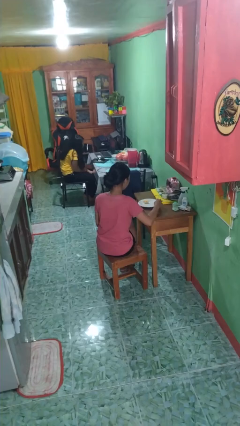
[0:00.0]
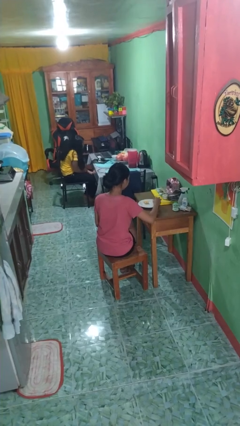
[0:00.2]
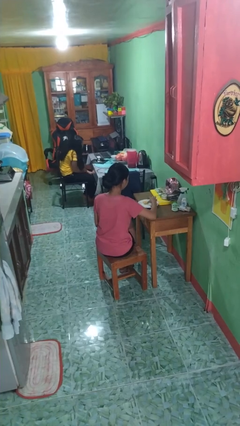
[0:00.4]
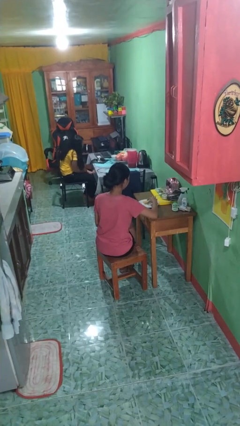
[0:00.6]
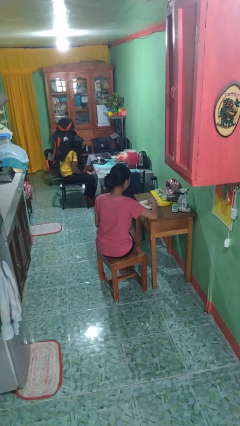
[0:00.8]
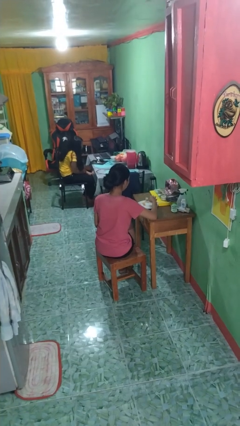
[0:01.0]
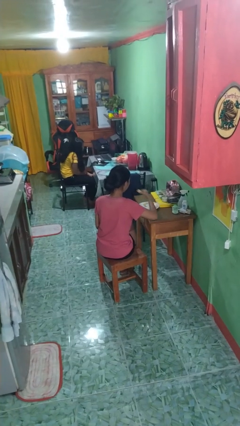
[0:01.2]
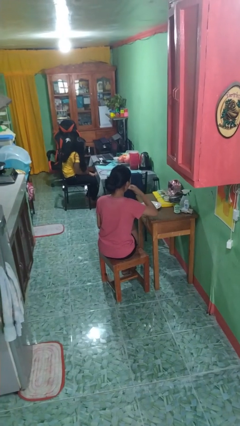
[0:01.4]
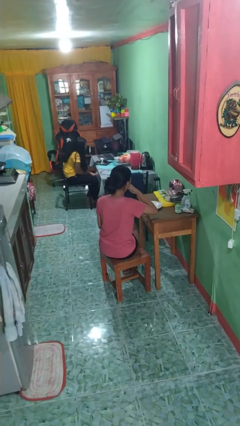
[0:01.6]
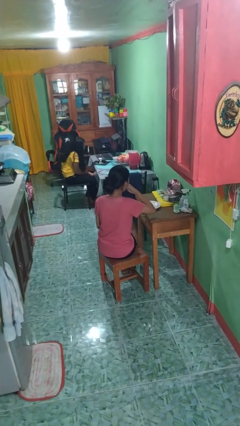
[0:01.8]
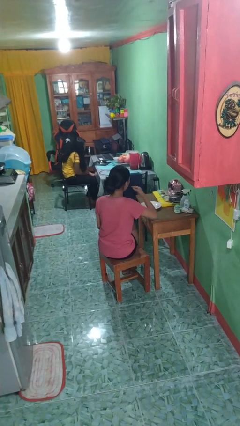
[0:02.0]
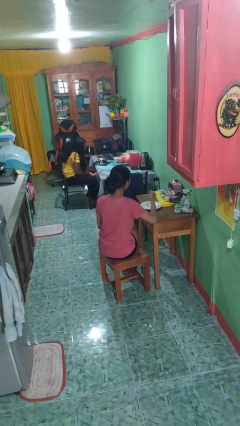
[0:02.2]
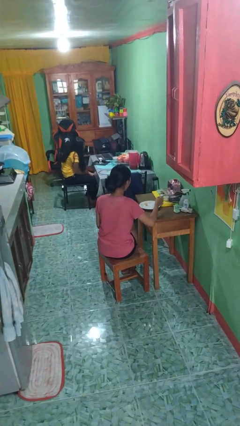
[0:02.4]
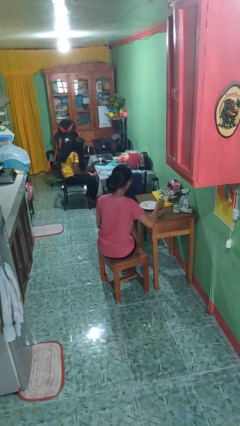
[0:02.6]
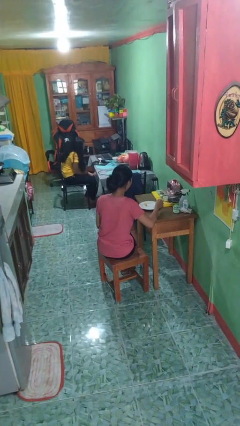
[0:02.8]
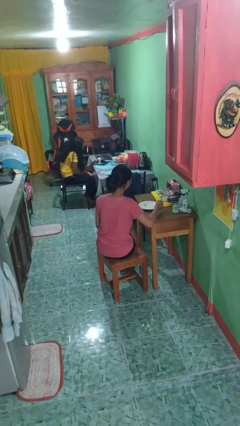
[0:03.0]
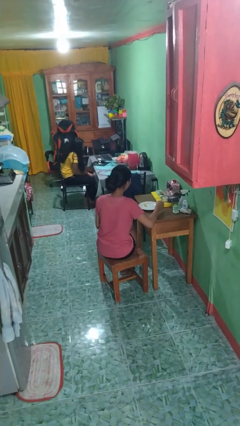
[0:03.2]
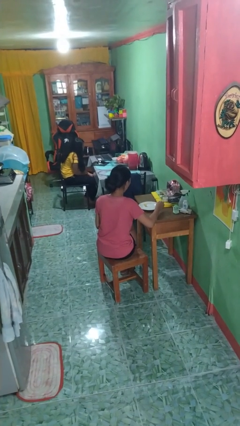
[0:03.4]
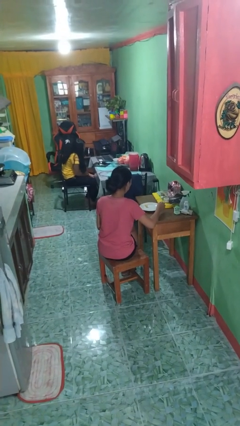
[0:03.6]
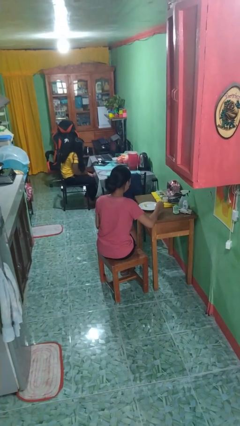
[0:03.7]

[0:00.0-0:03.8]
person eats with hands

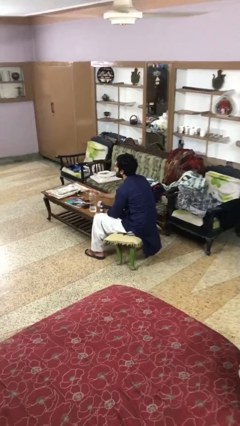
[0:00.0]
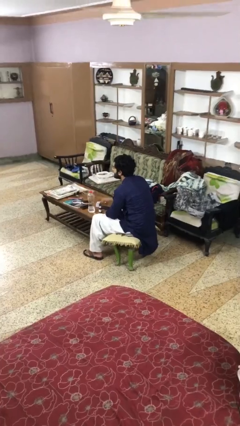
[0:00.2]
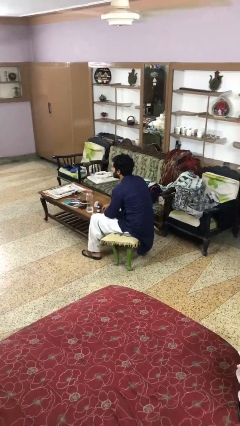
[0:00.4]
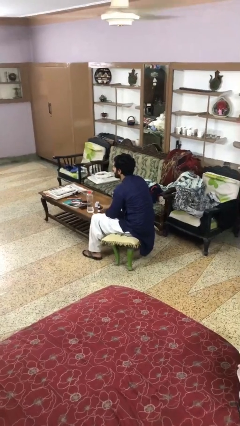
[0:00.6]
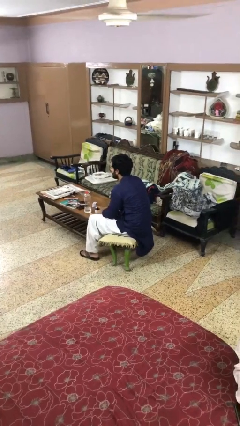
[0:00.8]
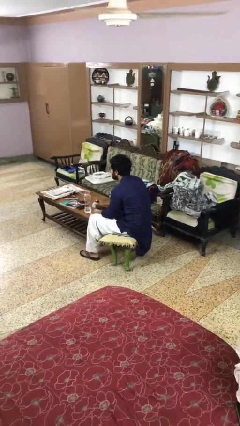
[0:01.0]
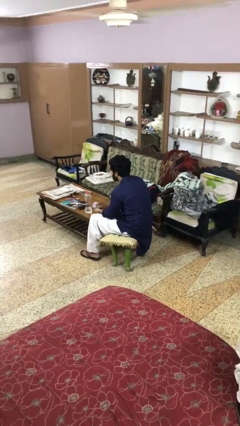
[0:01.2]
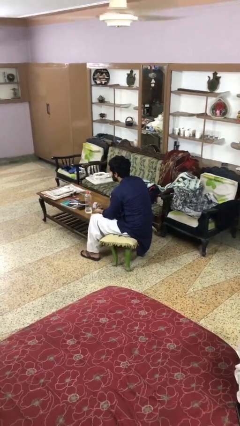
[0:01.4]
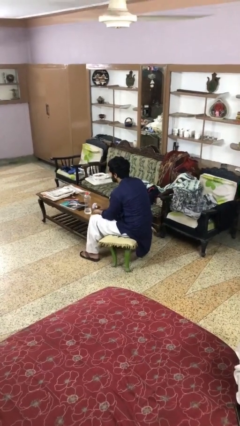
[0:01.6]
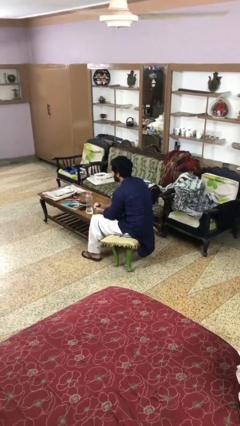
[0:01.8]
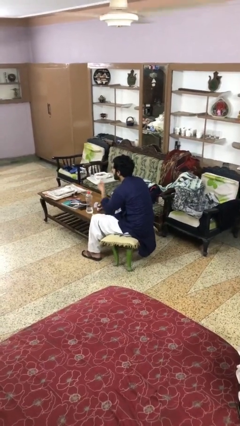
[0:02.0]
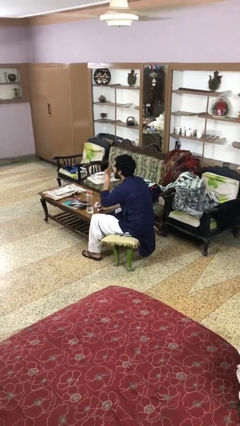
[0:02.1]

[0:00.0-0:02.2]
person takes medicine pills

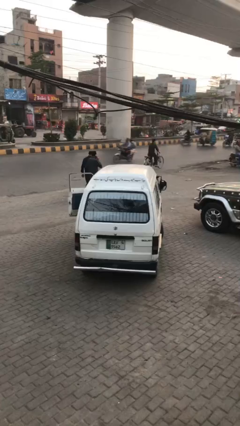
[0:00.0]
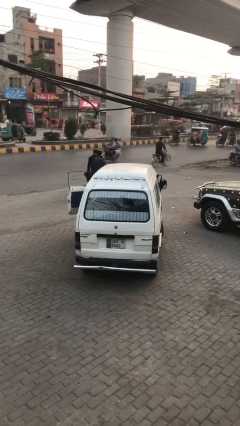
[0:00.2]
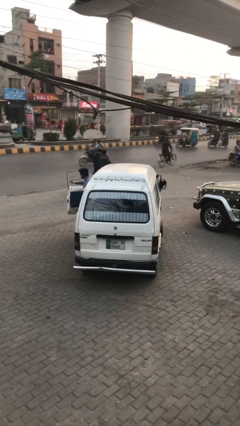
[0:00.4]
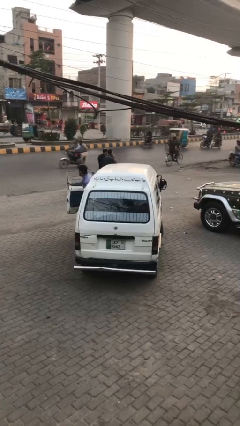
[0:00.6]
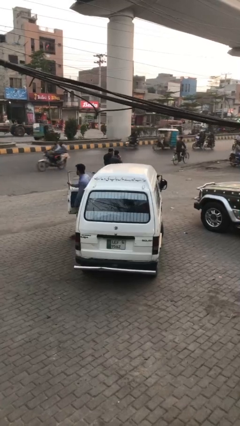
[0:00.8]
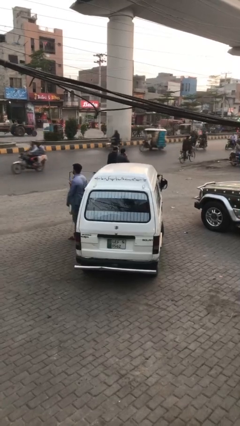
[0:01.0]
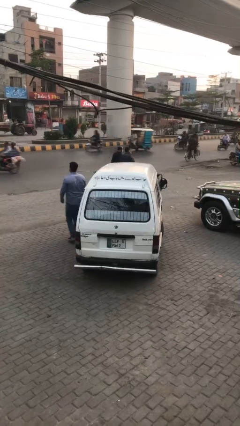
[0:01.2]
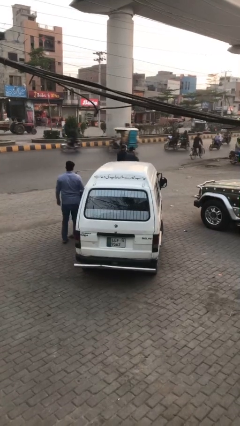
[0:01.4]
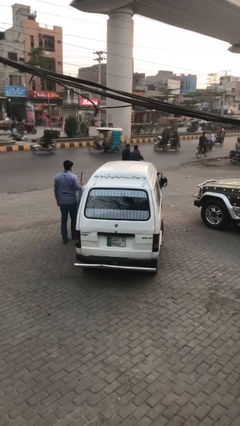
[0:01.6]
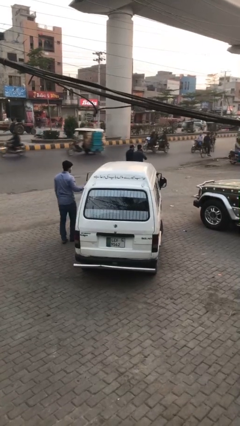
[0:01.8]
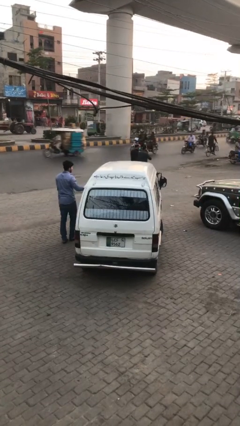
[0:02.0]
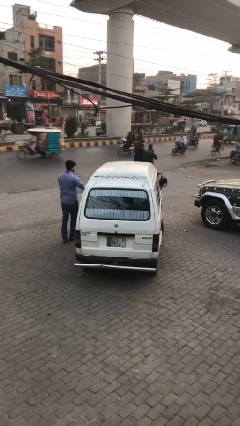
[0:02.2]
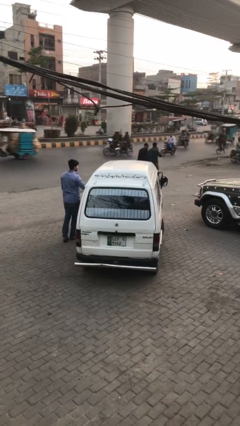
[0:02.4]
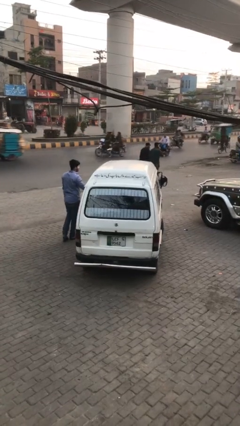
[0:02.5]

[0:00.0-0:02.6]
car drops off person

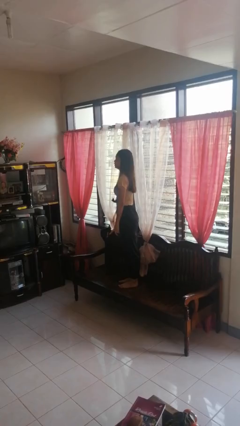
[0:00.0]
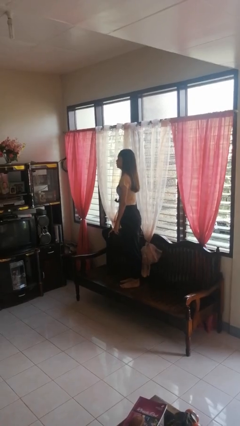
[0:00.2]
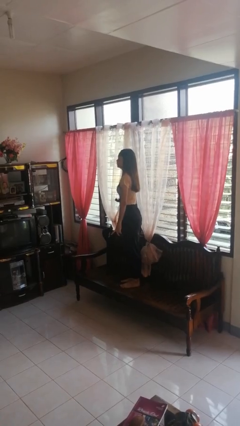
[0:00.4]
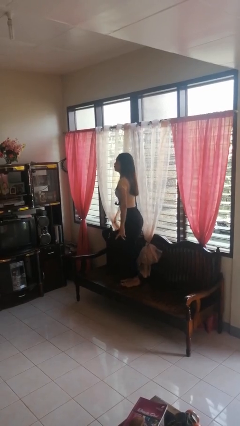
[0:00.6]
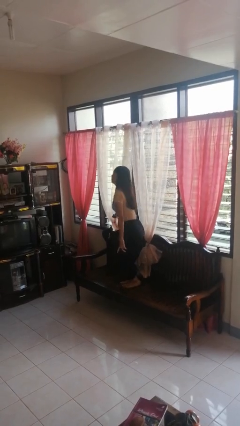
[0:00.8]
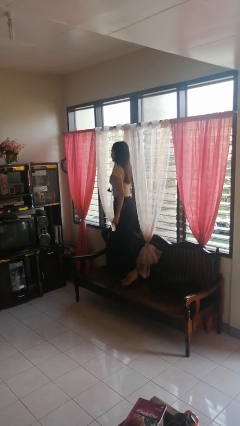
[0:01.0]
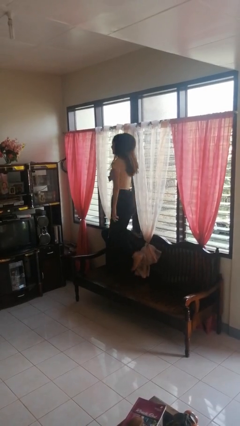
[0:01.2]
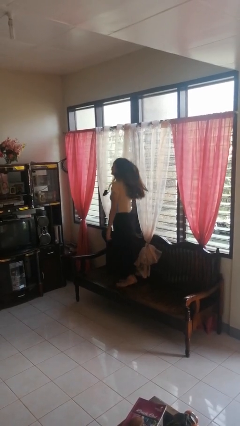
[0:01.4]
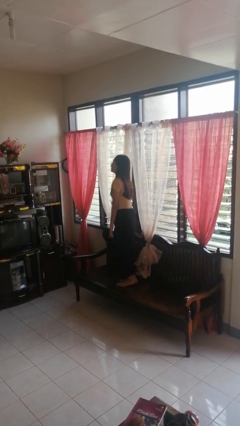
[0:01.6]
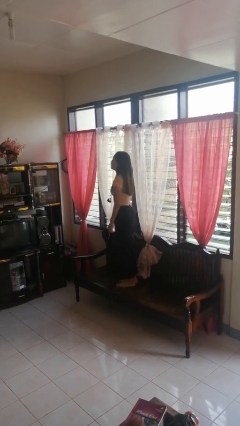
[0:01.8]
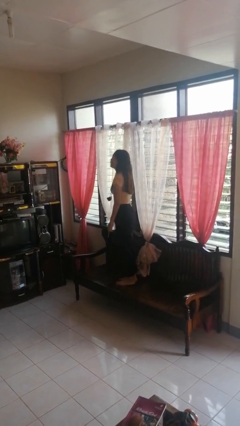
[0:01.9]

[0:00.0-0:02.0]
person jumps on couch

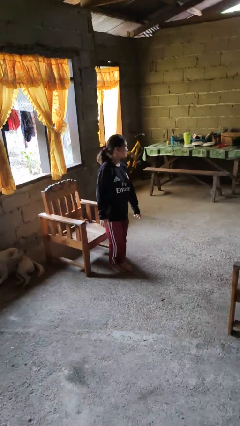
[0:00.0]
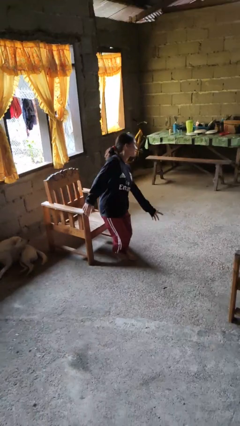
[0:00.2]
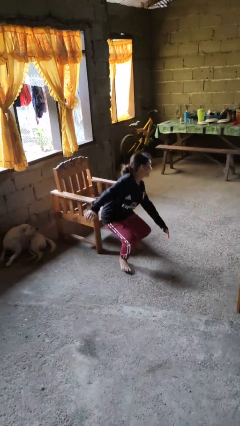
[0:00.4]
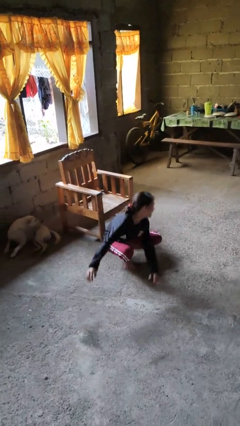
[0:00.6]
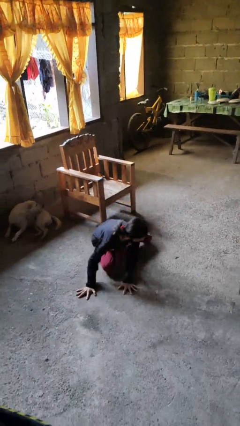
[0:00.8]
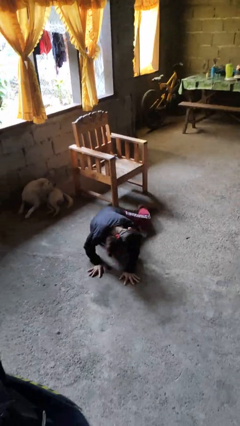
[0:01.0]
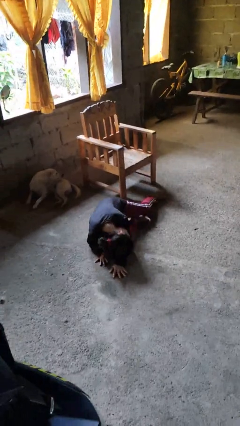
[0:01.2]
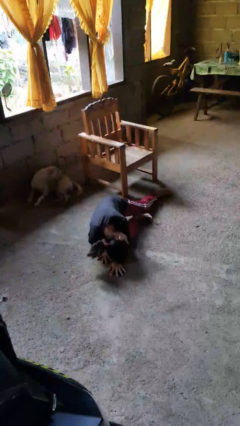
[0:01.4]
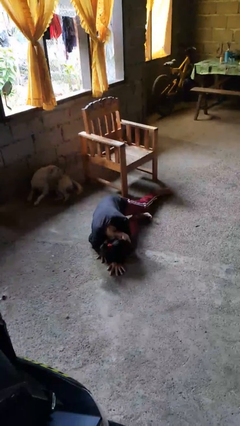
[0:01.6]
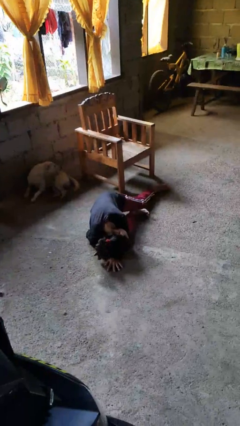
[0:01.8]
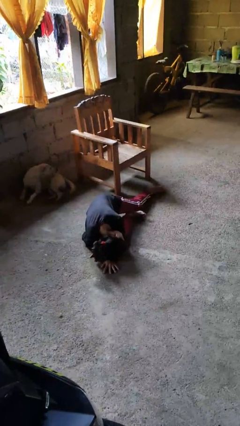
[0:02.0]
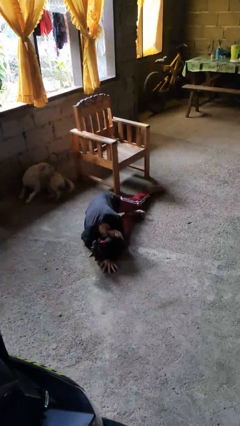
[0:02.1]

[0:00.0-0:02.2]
person falls from chair

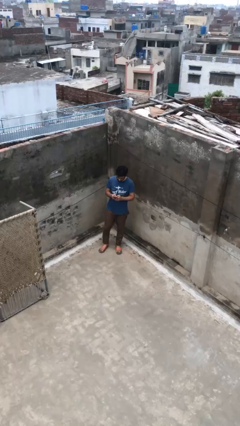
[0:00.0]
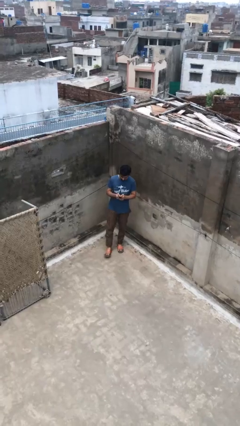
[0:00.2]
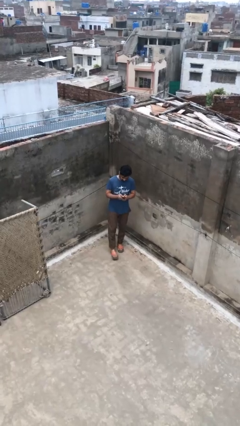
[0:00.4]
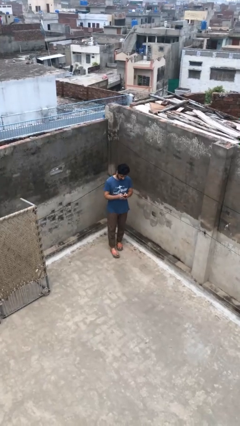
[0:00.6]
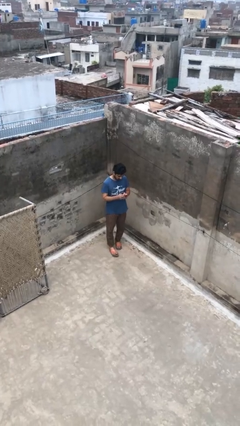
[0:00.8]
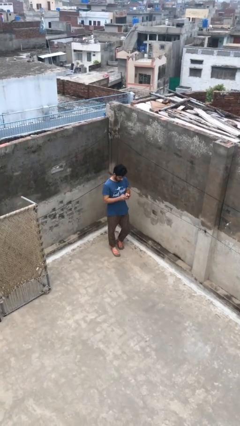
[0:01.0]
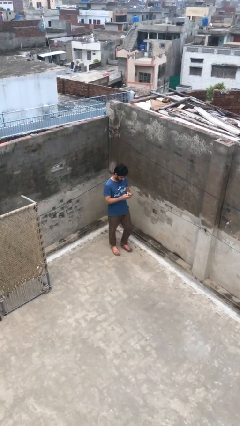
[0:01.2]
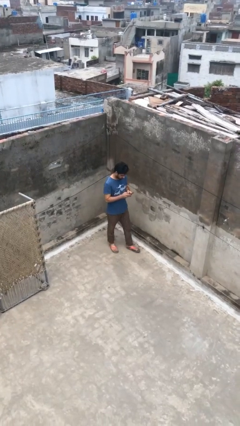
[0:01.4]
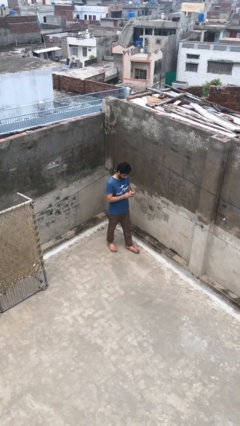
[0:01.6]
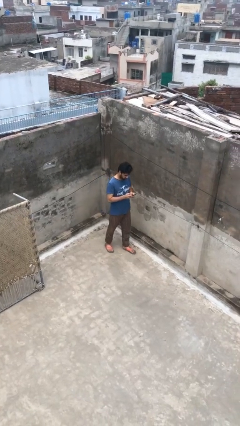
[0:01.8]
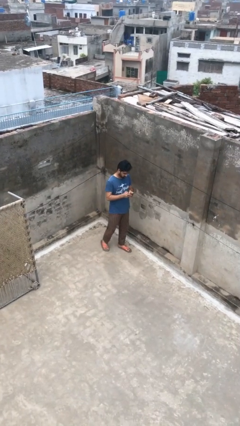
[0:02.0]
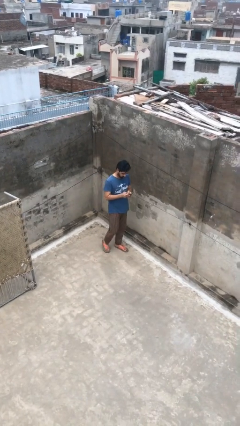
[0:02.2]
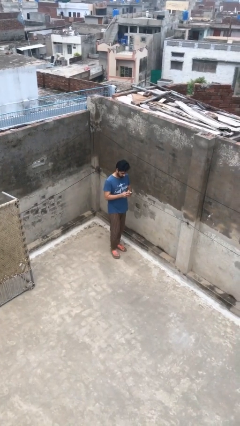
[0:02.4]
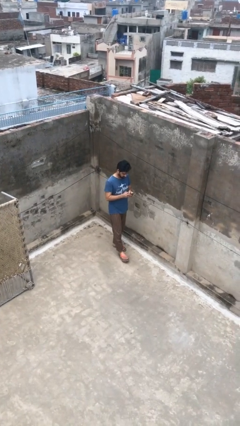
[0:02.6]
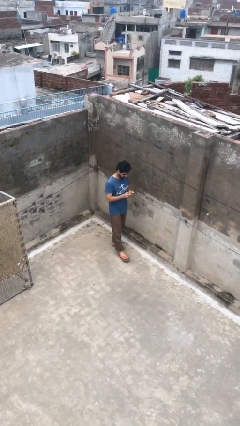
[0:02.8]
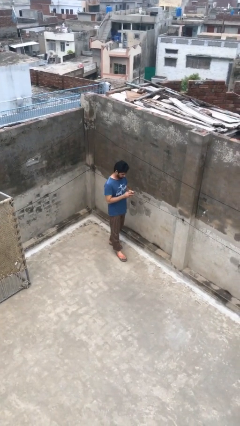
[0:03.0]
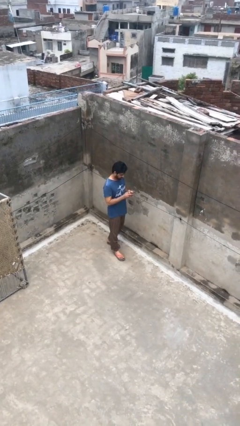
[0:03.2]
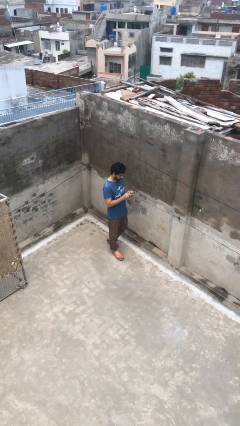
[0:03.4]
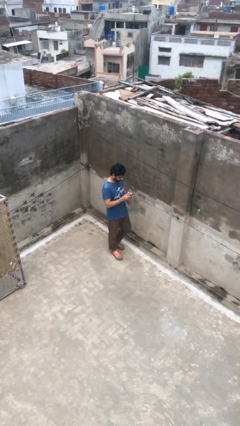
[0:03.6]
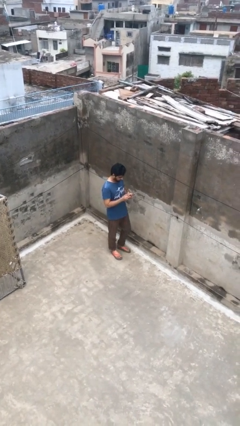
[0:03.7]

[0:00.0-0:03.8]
person texts on phone

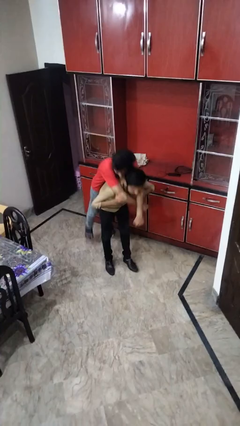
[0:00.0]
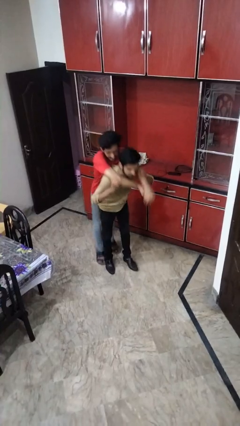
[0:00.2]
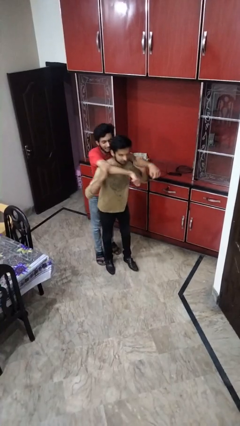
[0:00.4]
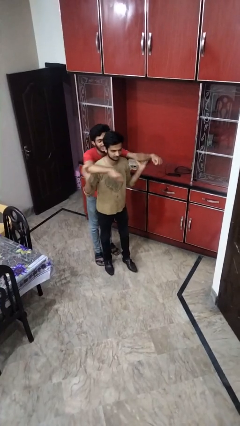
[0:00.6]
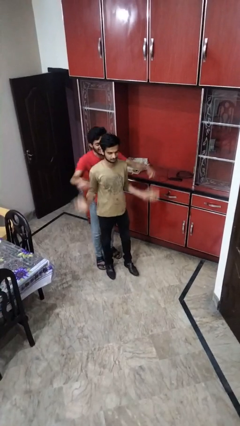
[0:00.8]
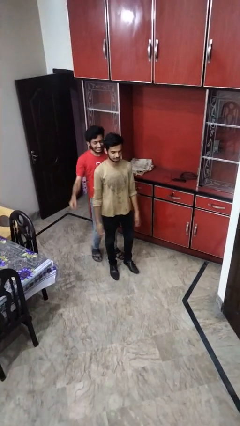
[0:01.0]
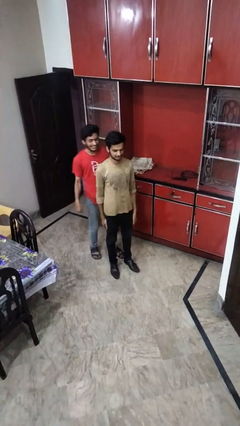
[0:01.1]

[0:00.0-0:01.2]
person puts down person
